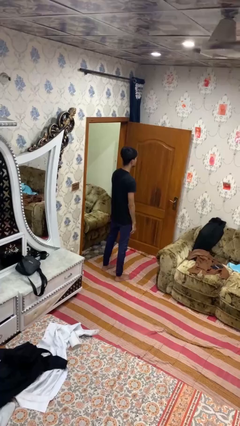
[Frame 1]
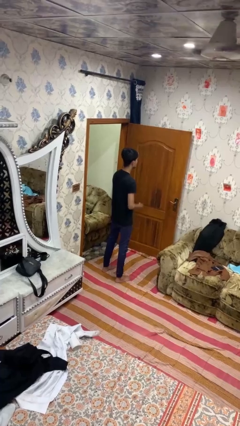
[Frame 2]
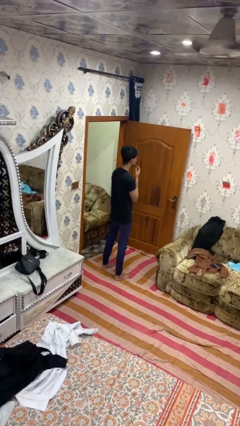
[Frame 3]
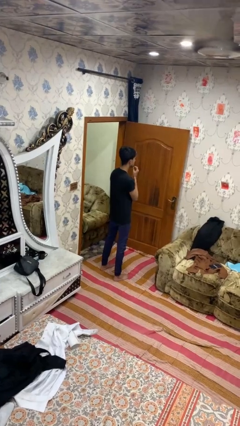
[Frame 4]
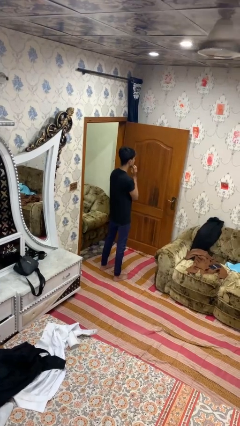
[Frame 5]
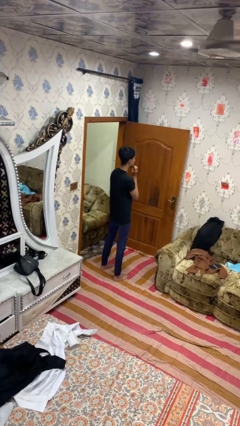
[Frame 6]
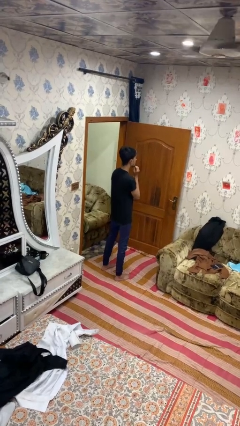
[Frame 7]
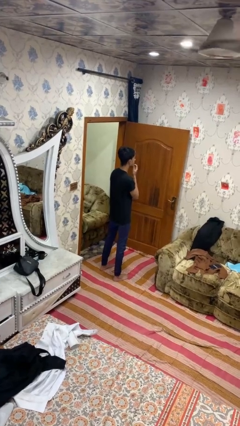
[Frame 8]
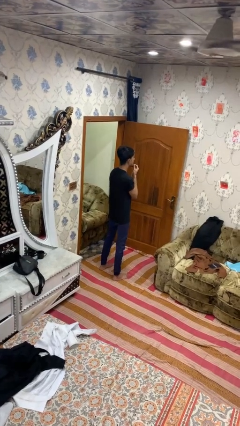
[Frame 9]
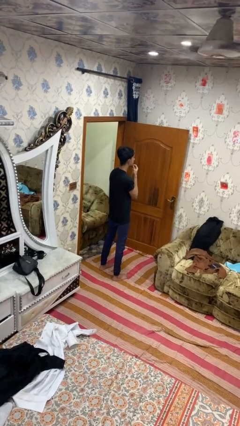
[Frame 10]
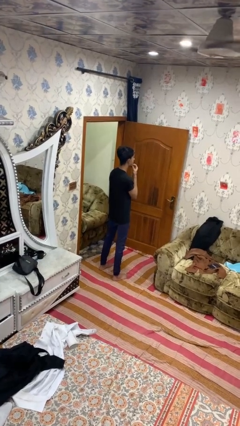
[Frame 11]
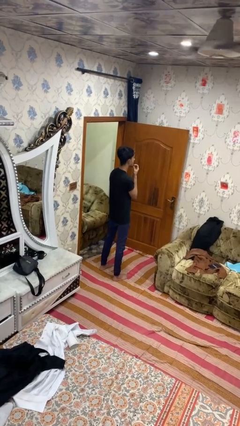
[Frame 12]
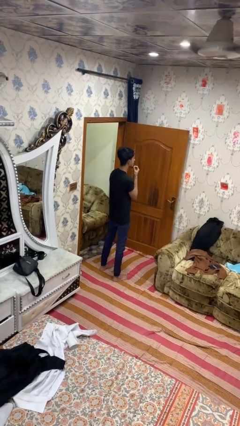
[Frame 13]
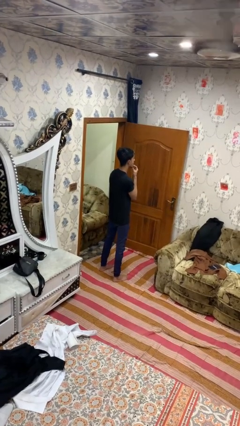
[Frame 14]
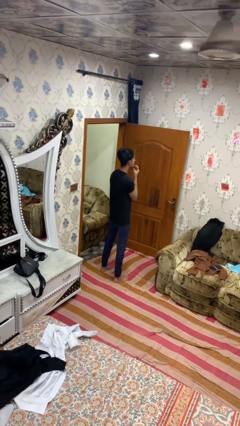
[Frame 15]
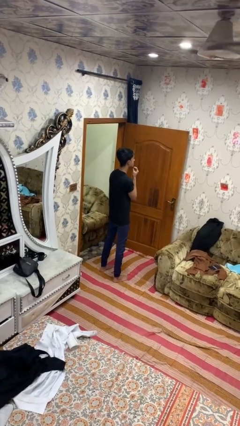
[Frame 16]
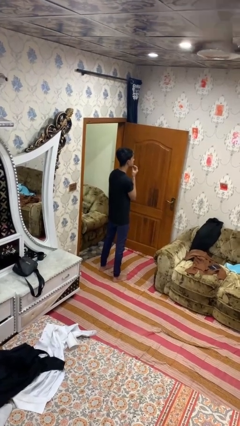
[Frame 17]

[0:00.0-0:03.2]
person strokes chin

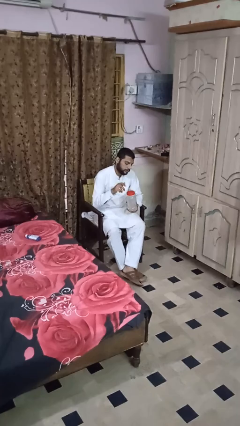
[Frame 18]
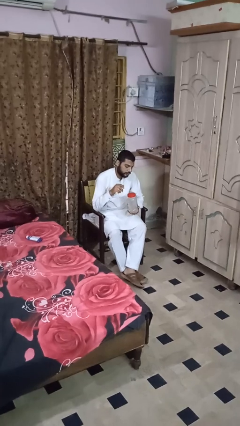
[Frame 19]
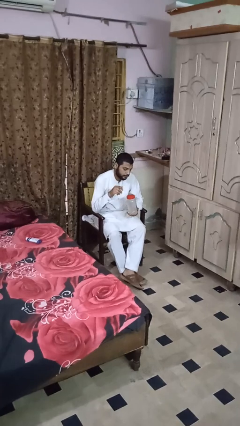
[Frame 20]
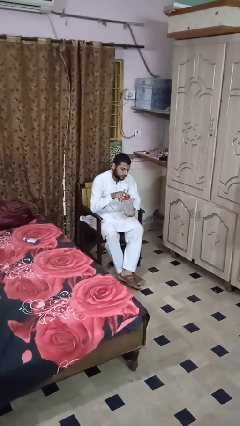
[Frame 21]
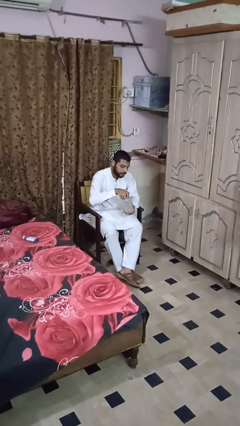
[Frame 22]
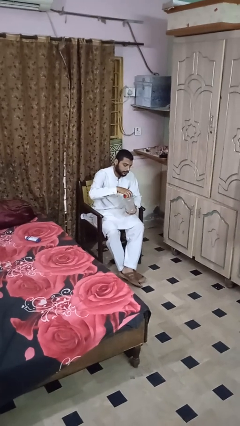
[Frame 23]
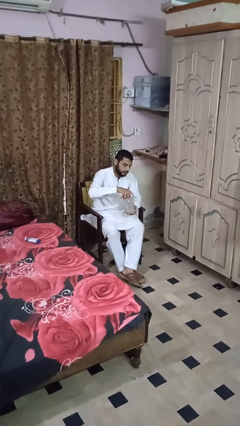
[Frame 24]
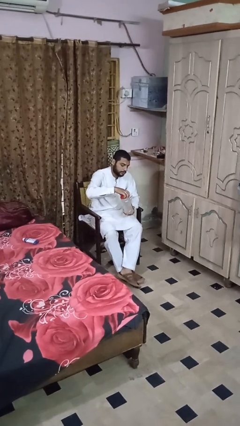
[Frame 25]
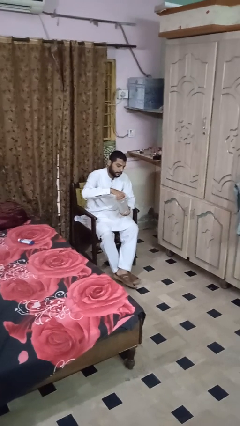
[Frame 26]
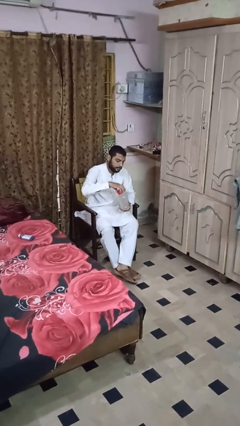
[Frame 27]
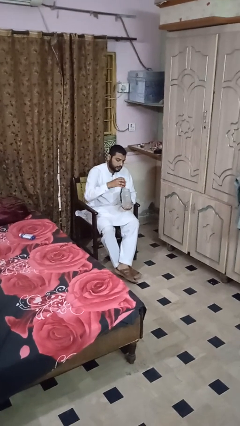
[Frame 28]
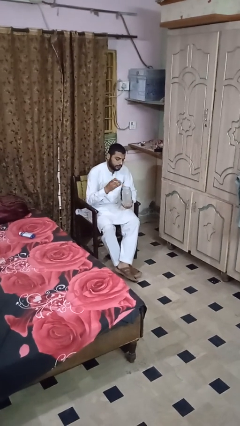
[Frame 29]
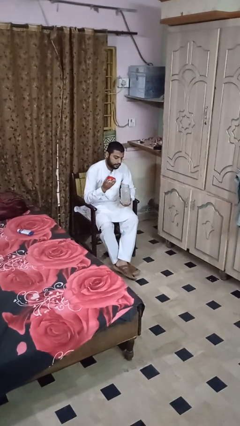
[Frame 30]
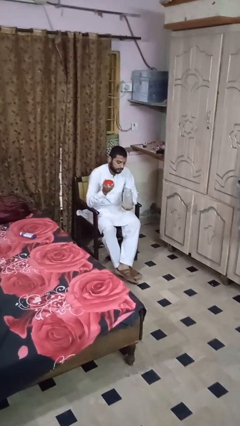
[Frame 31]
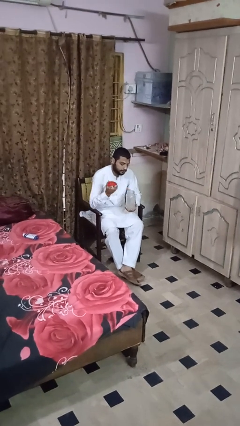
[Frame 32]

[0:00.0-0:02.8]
person opens jar

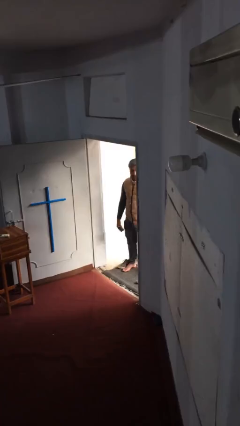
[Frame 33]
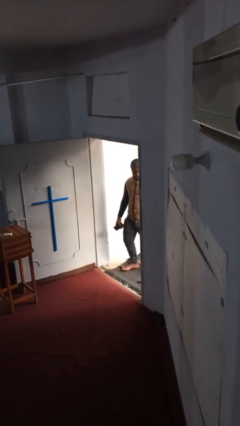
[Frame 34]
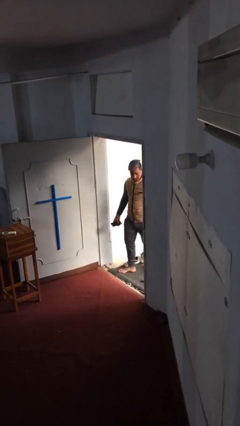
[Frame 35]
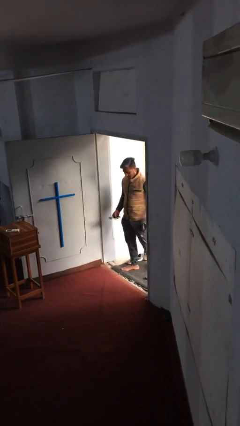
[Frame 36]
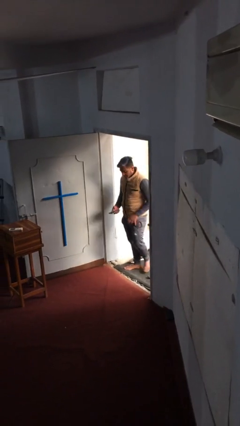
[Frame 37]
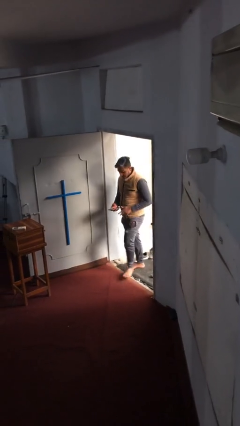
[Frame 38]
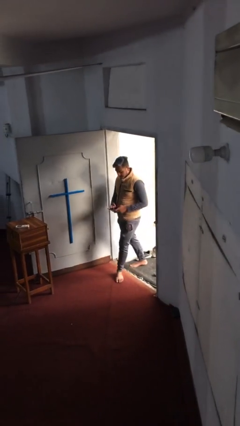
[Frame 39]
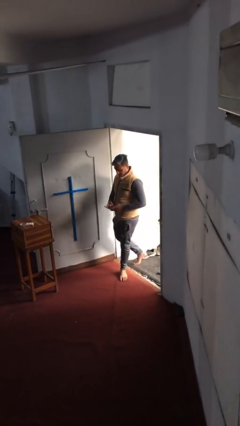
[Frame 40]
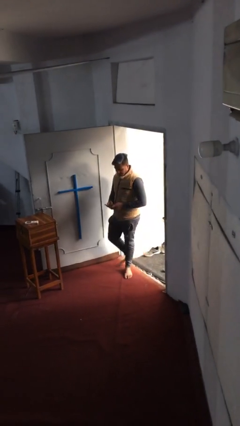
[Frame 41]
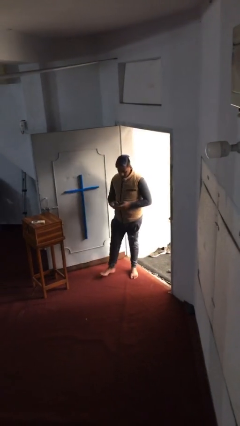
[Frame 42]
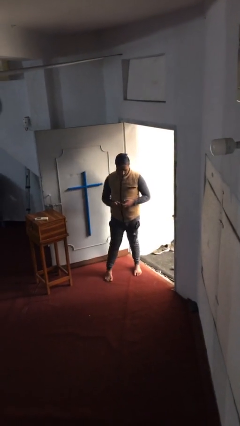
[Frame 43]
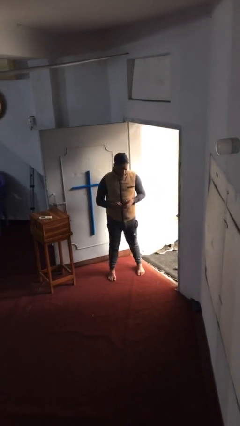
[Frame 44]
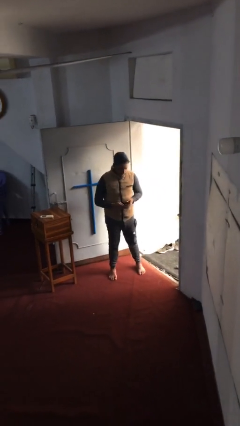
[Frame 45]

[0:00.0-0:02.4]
person enters scene through structure

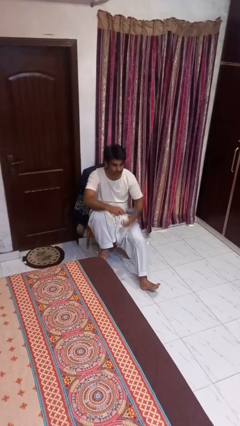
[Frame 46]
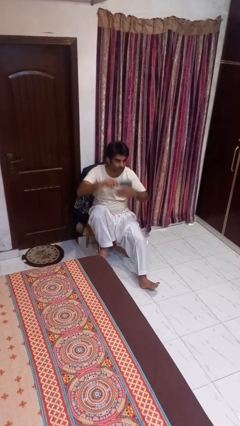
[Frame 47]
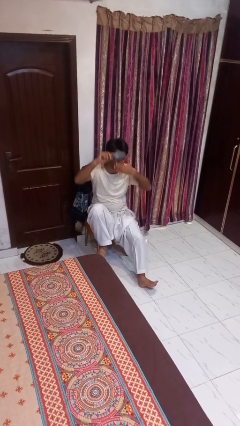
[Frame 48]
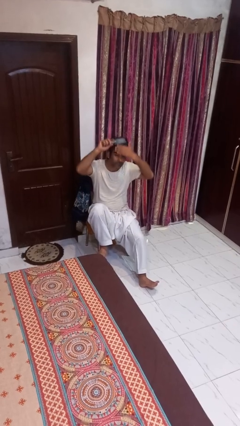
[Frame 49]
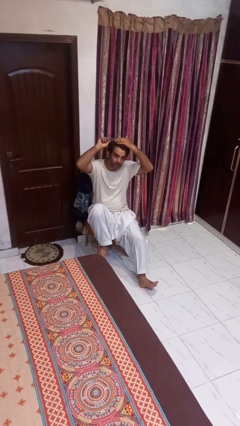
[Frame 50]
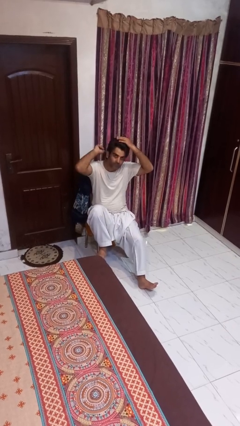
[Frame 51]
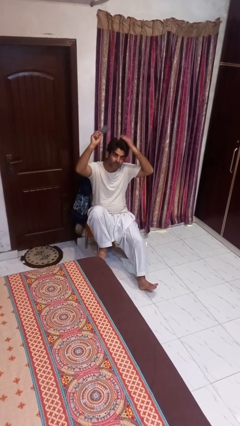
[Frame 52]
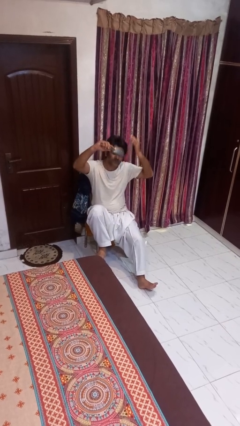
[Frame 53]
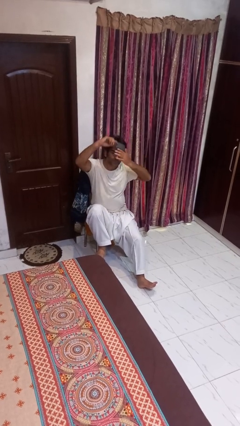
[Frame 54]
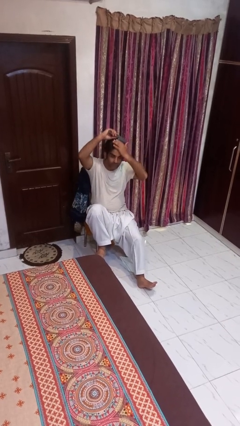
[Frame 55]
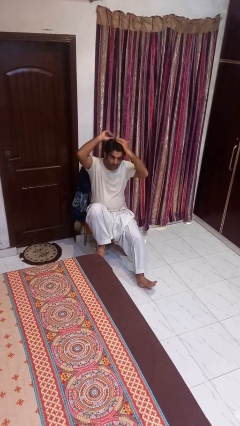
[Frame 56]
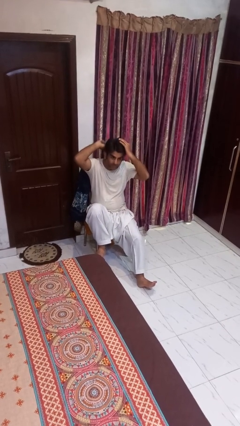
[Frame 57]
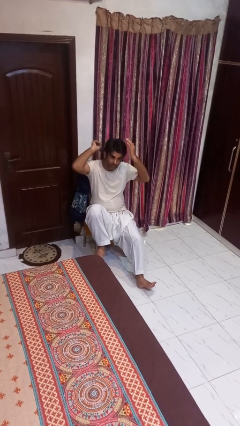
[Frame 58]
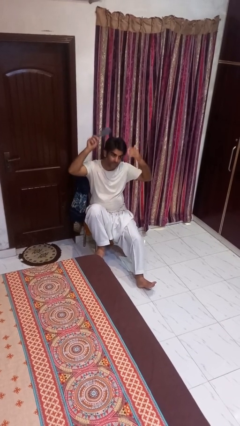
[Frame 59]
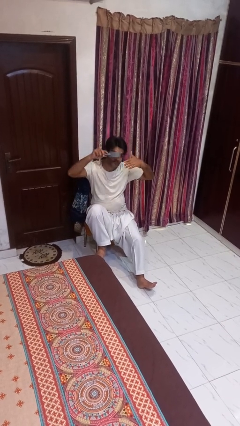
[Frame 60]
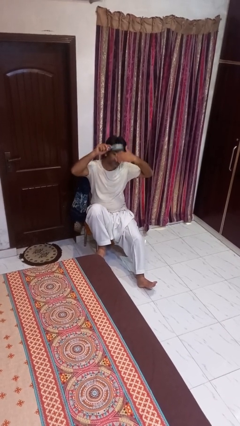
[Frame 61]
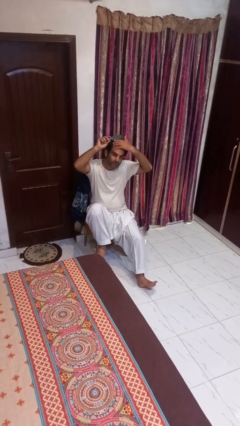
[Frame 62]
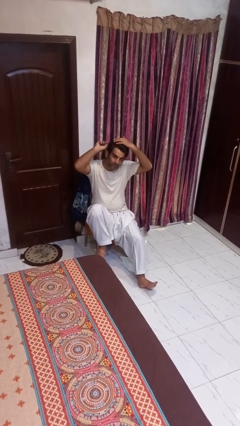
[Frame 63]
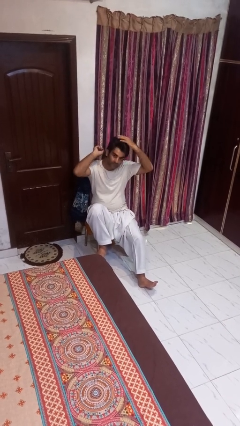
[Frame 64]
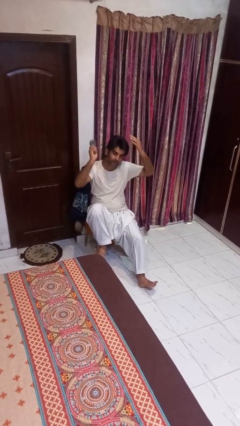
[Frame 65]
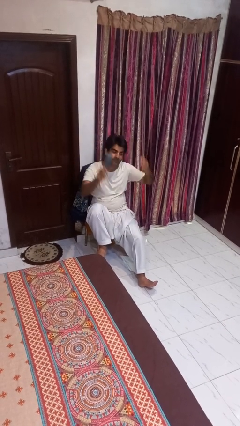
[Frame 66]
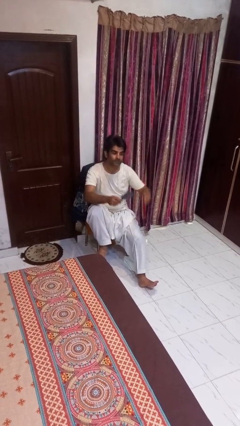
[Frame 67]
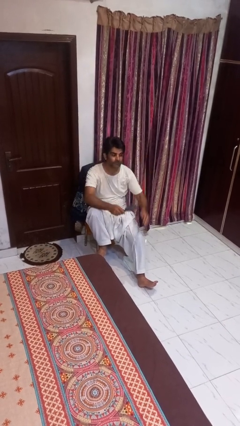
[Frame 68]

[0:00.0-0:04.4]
person brushes hair

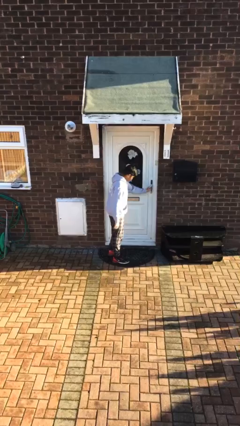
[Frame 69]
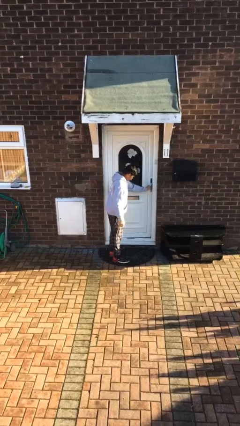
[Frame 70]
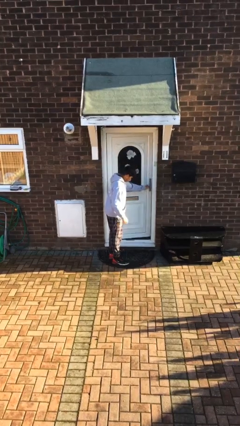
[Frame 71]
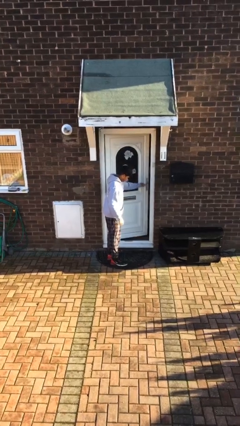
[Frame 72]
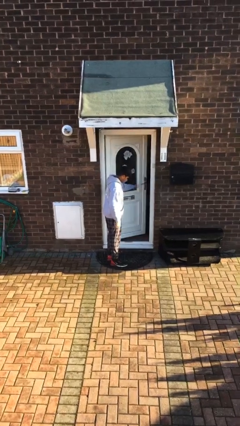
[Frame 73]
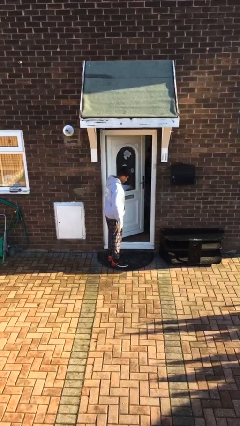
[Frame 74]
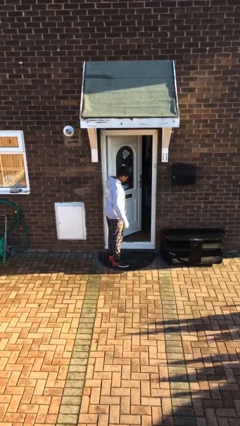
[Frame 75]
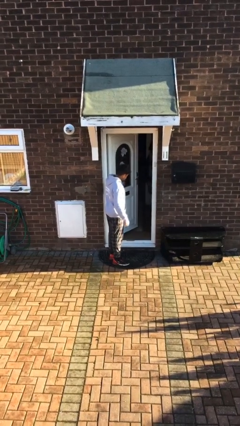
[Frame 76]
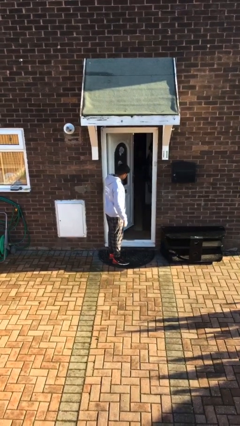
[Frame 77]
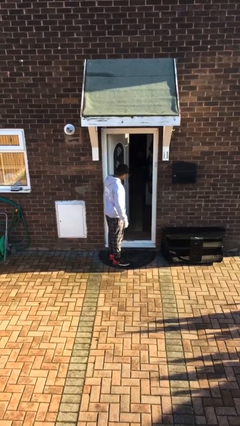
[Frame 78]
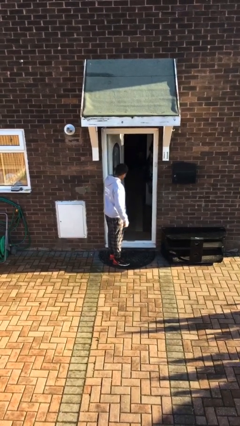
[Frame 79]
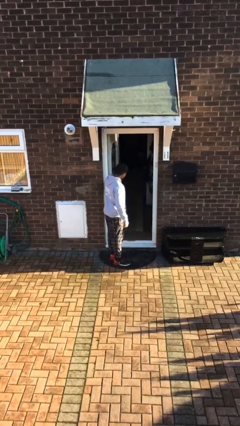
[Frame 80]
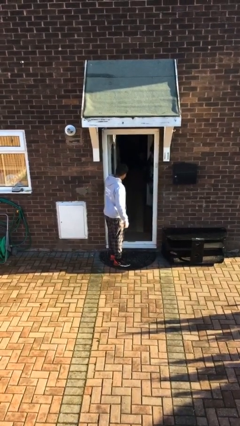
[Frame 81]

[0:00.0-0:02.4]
person opens facility door

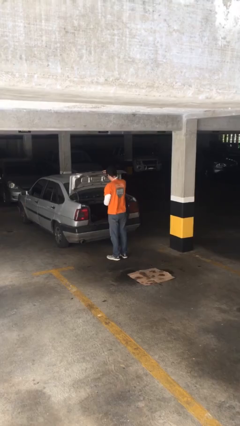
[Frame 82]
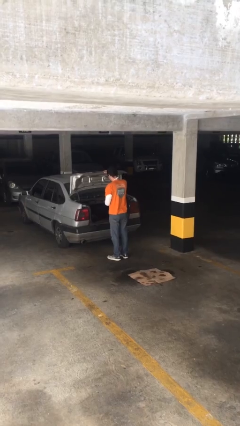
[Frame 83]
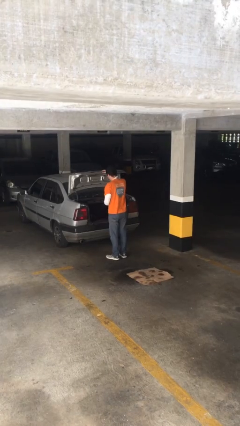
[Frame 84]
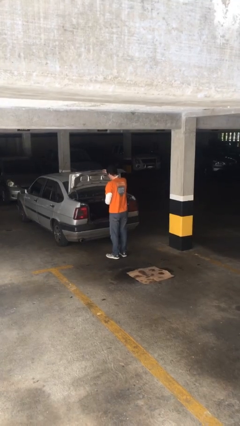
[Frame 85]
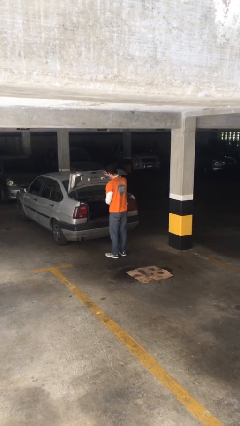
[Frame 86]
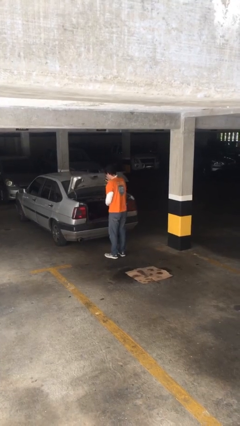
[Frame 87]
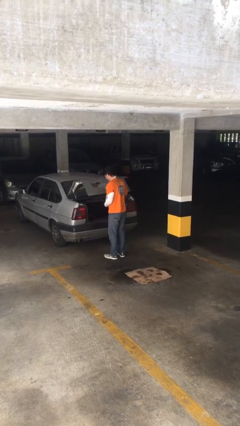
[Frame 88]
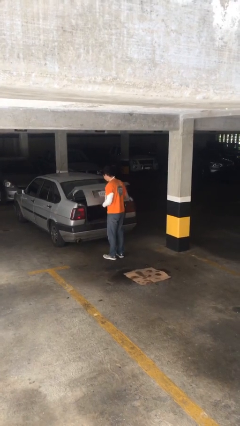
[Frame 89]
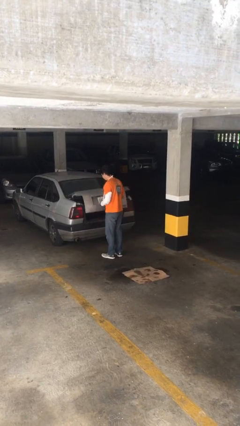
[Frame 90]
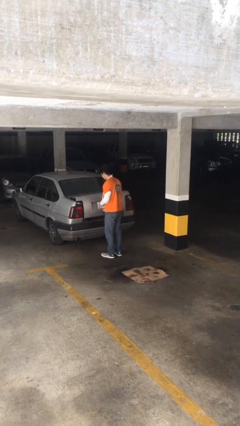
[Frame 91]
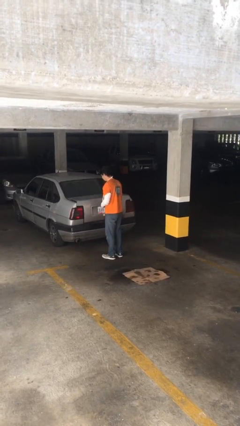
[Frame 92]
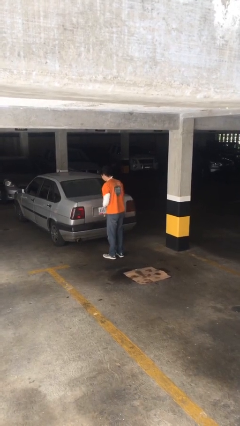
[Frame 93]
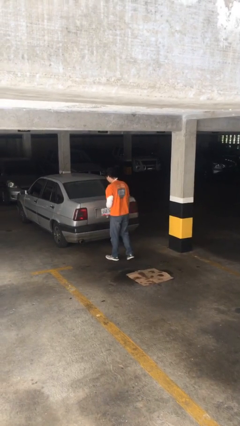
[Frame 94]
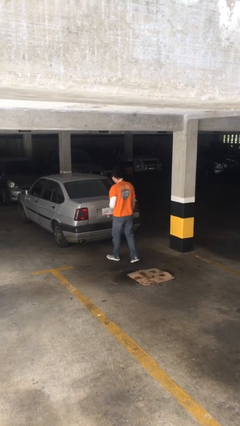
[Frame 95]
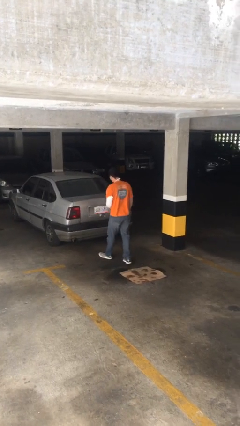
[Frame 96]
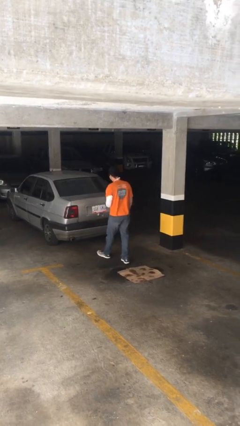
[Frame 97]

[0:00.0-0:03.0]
person closes car trunk
